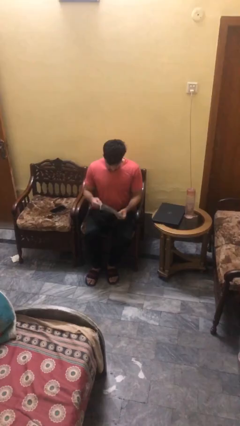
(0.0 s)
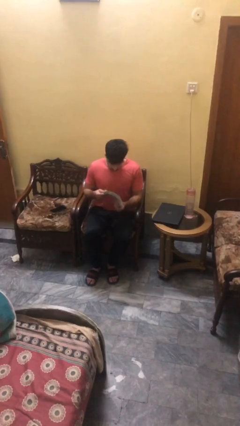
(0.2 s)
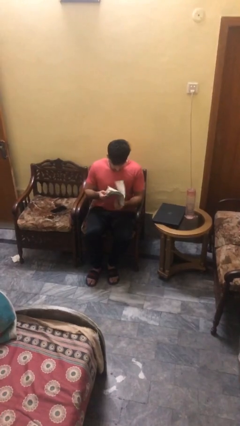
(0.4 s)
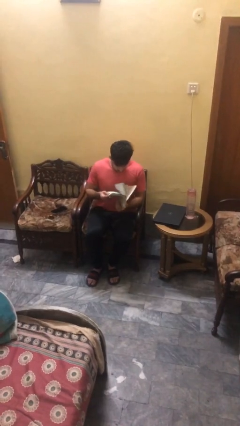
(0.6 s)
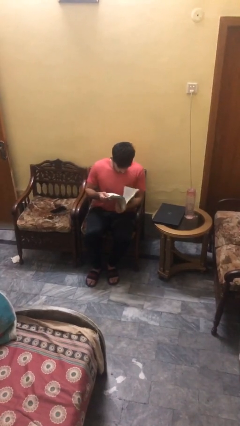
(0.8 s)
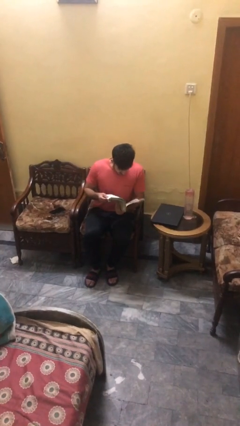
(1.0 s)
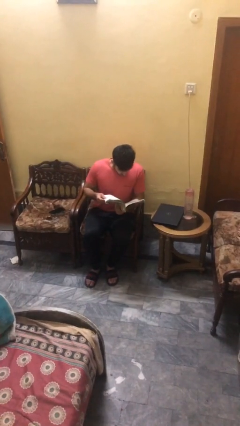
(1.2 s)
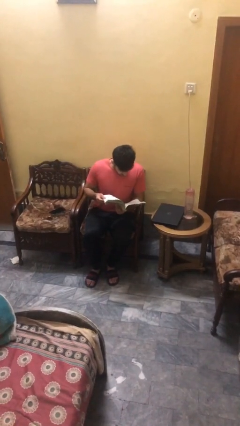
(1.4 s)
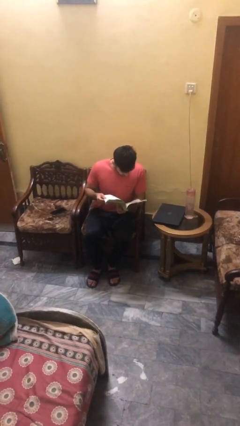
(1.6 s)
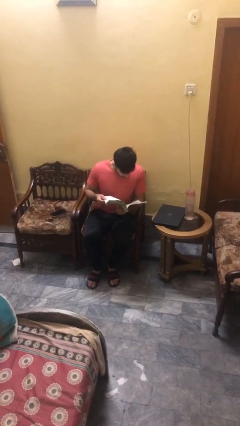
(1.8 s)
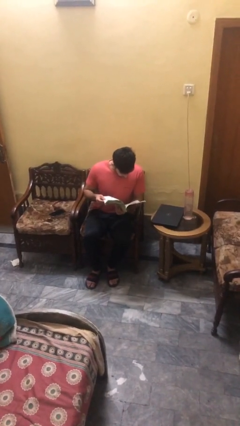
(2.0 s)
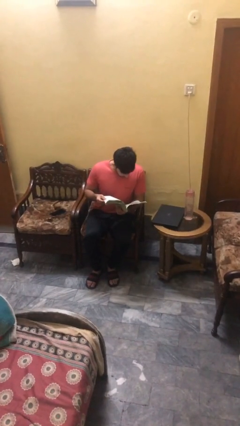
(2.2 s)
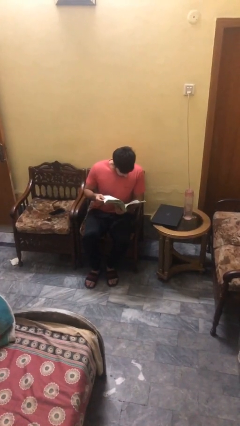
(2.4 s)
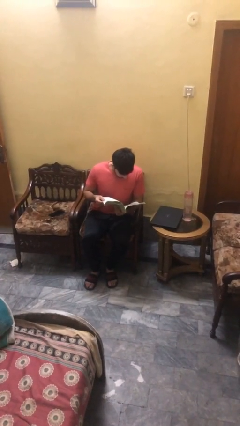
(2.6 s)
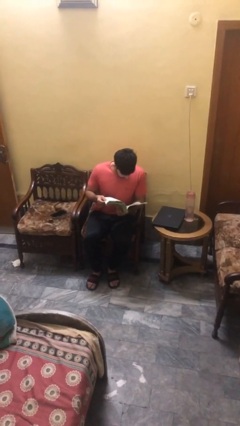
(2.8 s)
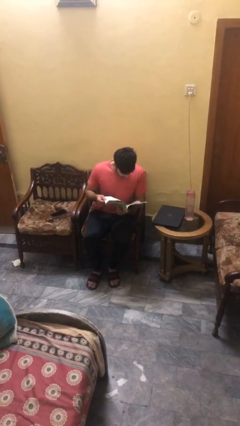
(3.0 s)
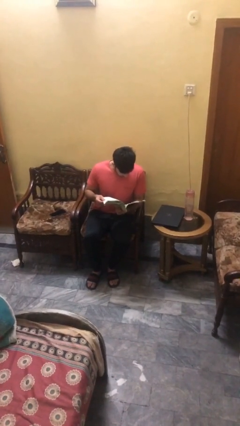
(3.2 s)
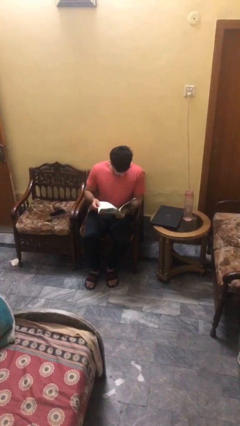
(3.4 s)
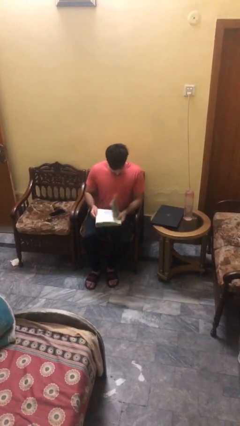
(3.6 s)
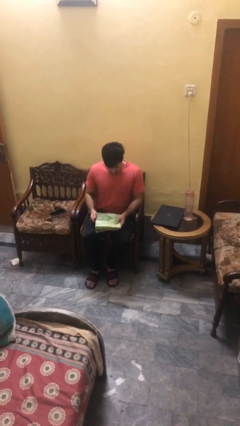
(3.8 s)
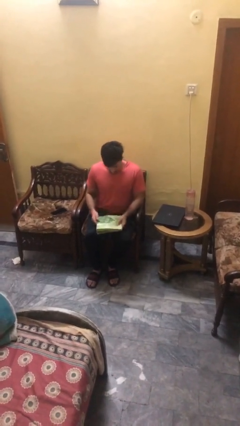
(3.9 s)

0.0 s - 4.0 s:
person reads document

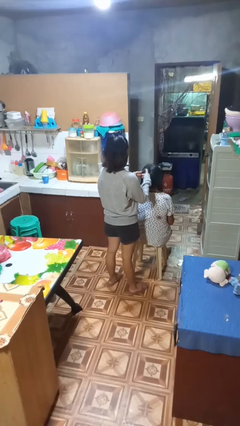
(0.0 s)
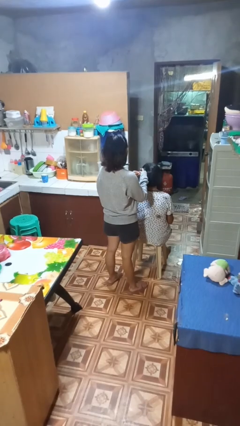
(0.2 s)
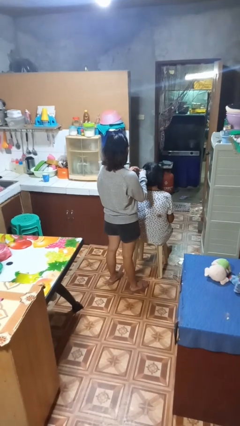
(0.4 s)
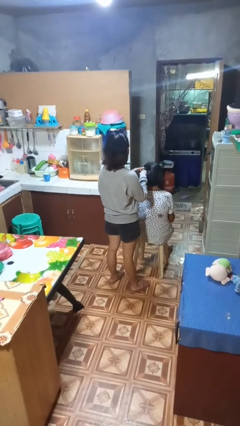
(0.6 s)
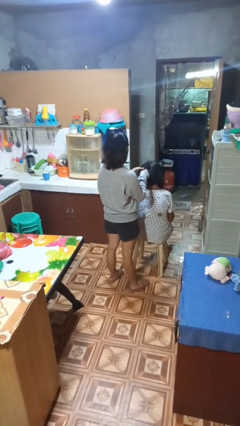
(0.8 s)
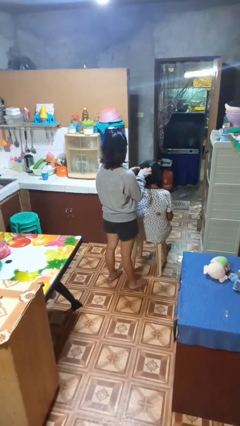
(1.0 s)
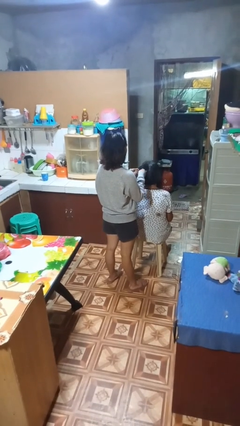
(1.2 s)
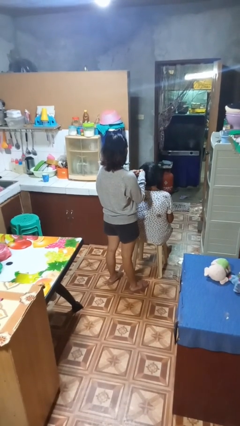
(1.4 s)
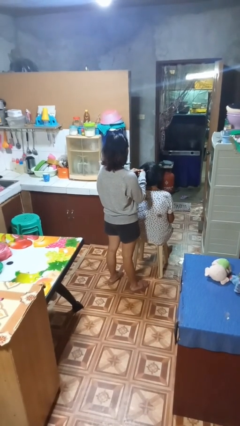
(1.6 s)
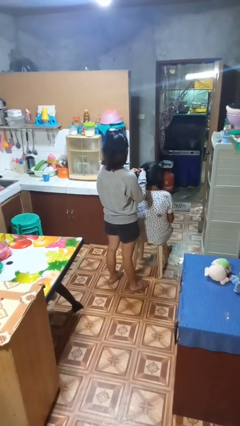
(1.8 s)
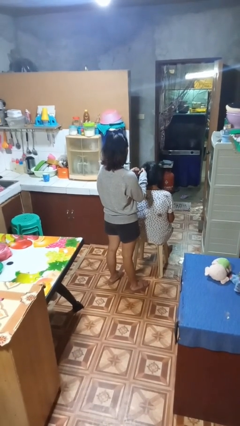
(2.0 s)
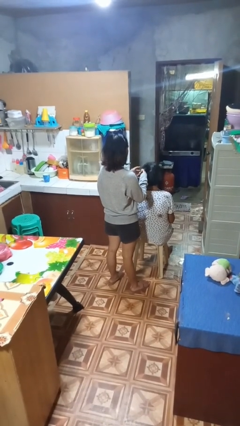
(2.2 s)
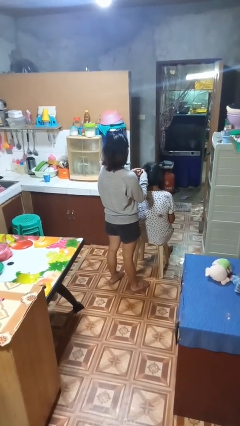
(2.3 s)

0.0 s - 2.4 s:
person braids hair of person

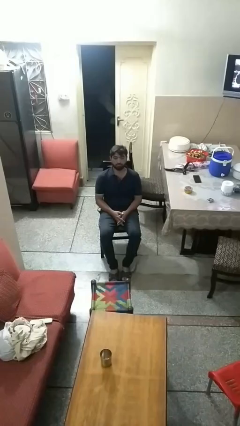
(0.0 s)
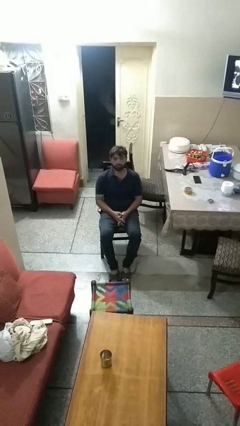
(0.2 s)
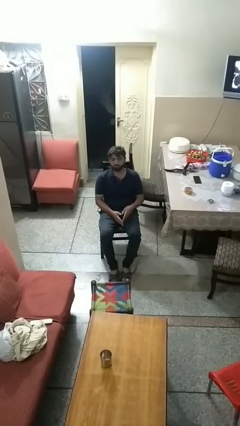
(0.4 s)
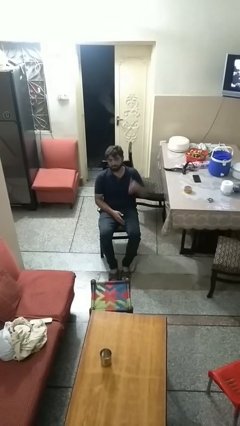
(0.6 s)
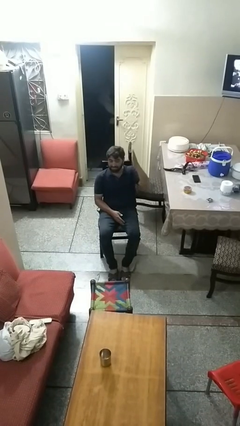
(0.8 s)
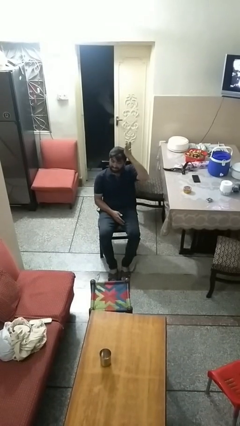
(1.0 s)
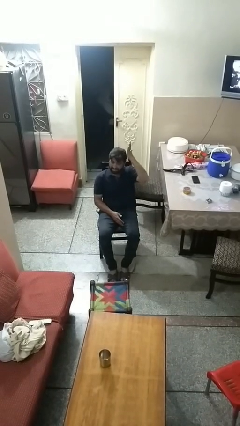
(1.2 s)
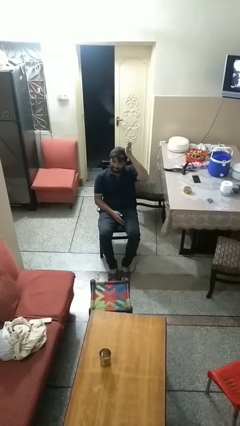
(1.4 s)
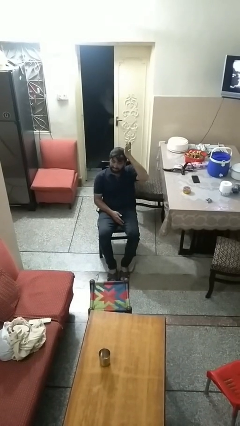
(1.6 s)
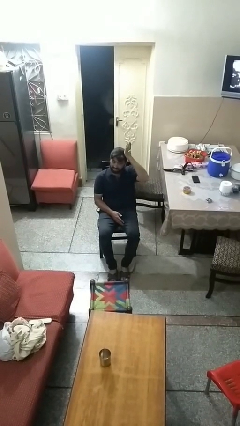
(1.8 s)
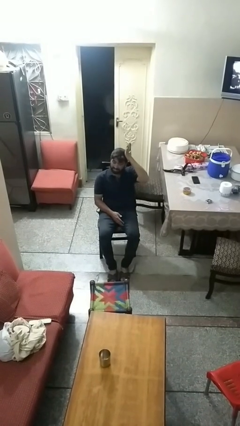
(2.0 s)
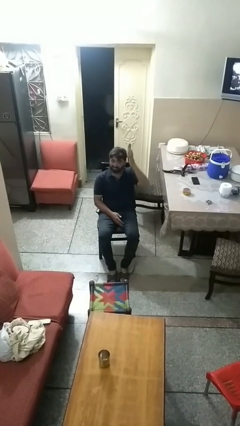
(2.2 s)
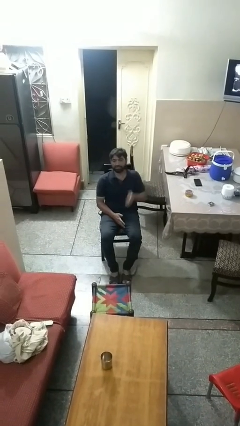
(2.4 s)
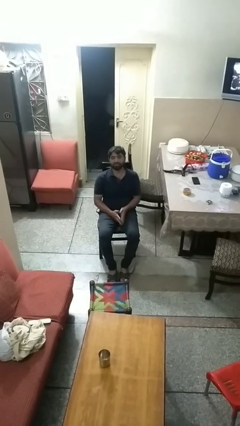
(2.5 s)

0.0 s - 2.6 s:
person pats head

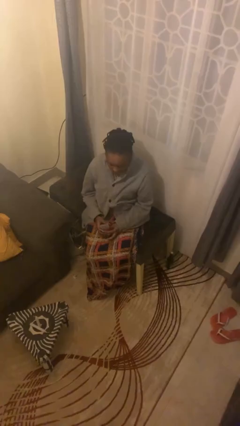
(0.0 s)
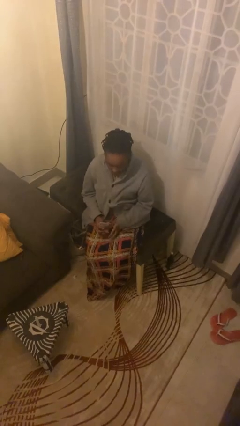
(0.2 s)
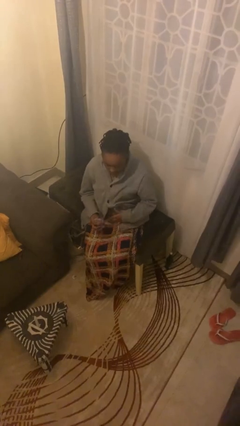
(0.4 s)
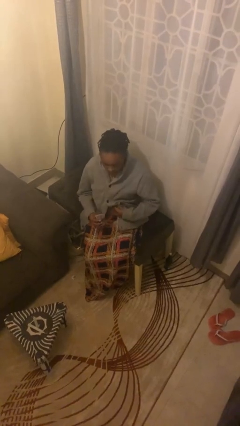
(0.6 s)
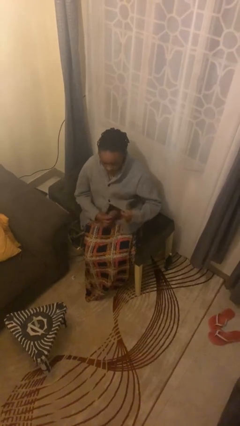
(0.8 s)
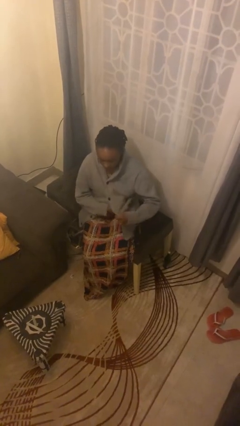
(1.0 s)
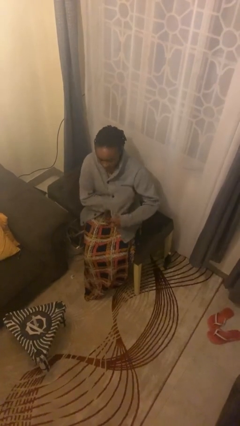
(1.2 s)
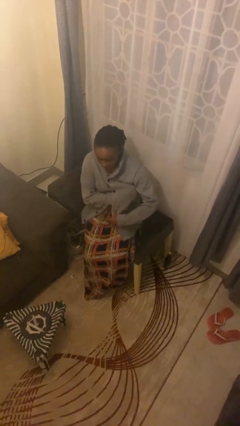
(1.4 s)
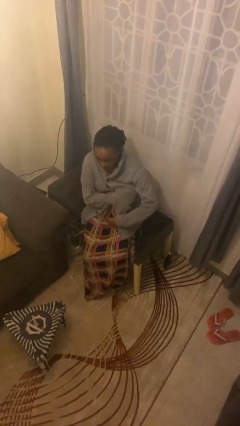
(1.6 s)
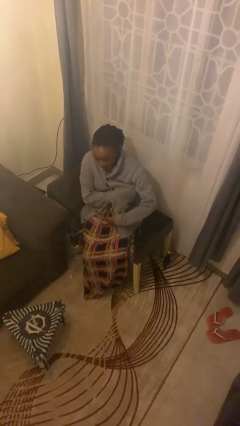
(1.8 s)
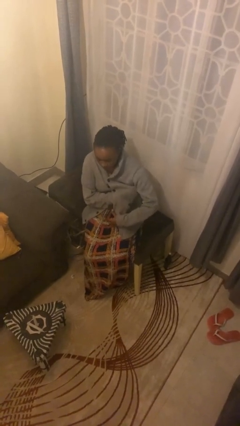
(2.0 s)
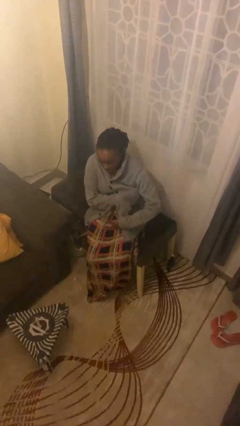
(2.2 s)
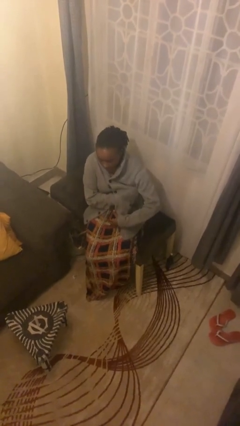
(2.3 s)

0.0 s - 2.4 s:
person applies deodorant

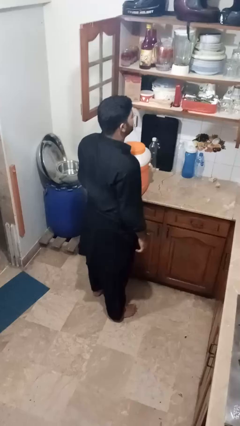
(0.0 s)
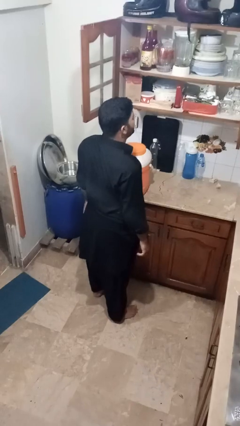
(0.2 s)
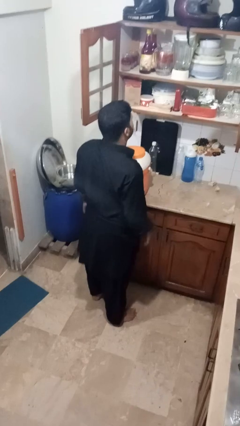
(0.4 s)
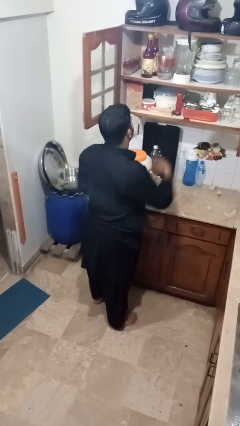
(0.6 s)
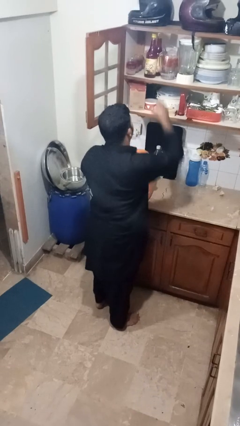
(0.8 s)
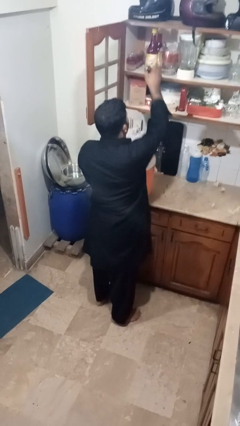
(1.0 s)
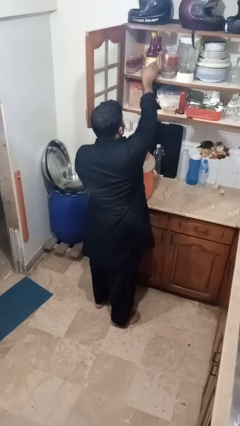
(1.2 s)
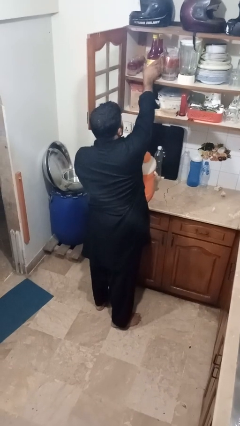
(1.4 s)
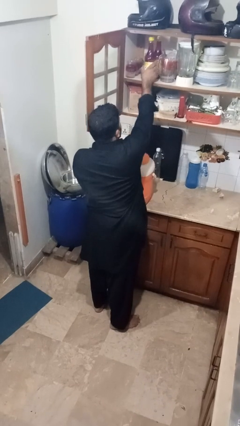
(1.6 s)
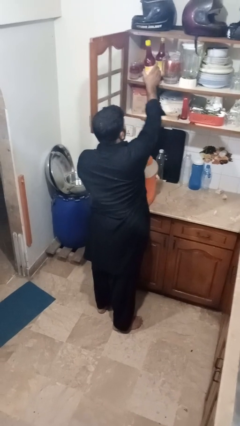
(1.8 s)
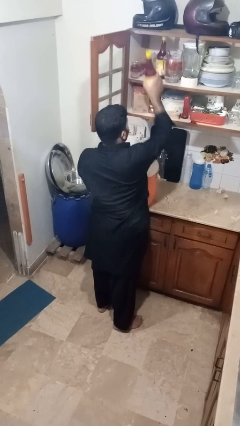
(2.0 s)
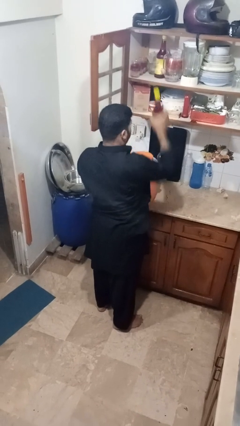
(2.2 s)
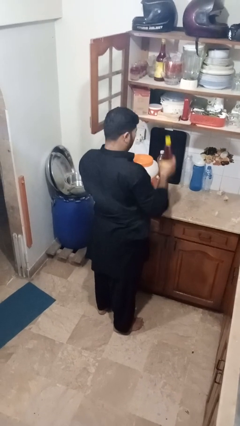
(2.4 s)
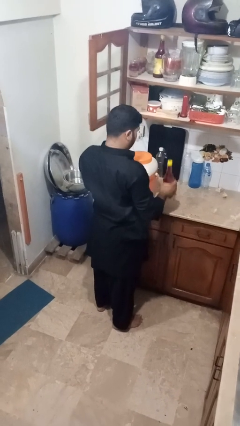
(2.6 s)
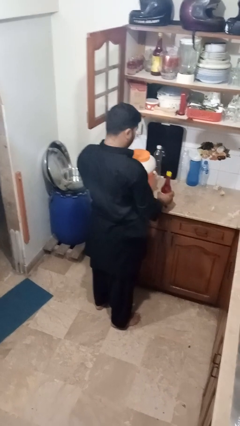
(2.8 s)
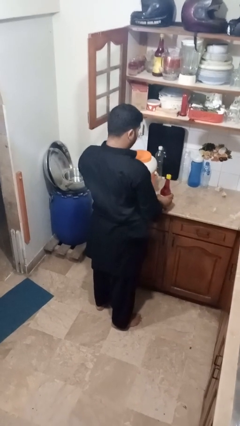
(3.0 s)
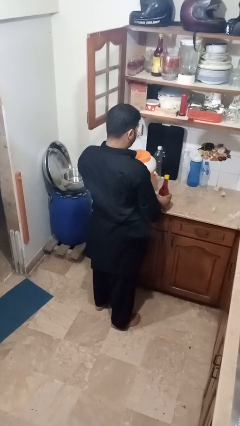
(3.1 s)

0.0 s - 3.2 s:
person picks up object from cabinet

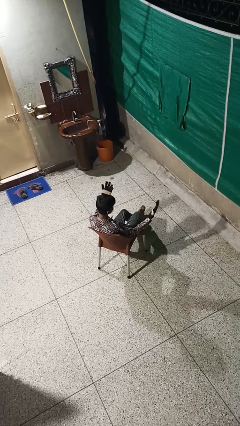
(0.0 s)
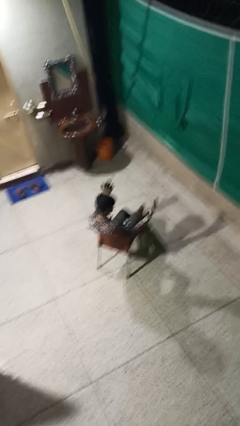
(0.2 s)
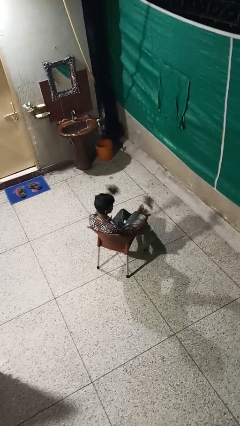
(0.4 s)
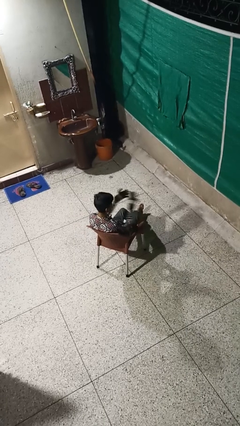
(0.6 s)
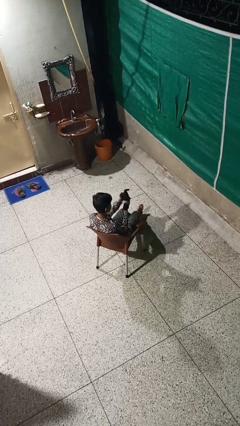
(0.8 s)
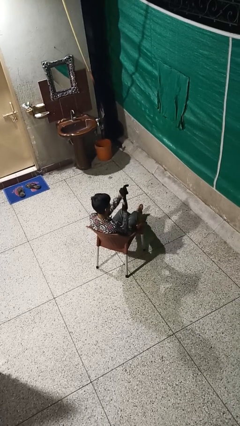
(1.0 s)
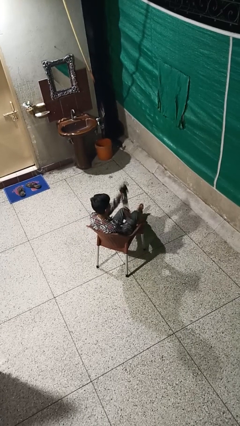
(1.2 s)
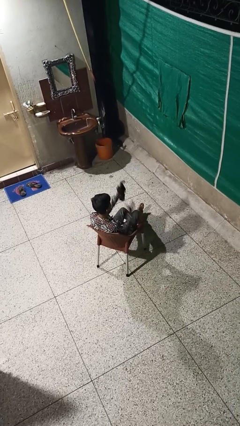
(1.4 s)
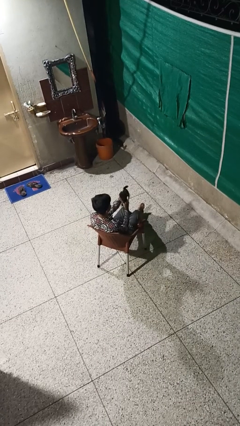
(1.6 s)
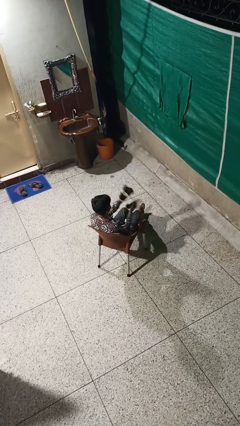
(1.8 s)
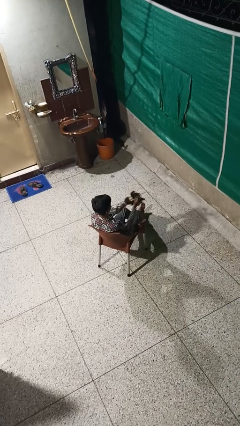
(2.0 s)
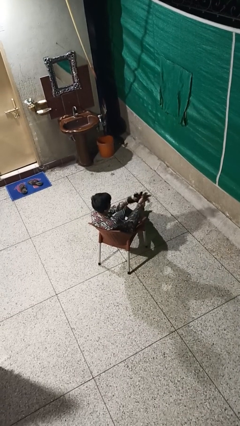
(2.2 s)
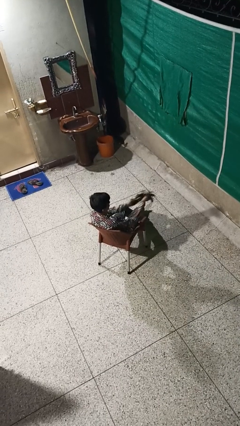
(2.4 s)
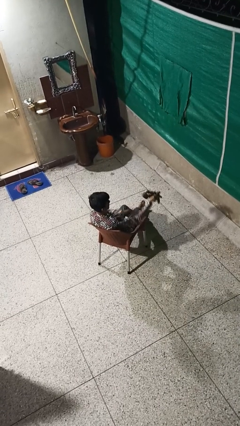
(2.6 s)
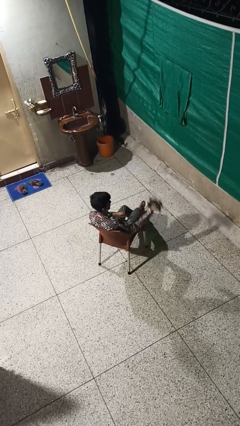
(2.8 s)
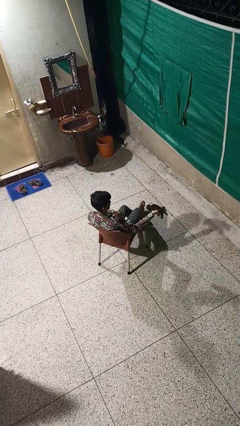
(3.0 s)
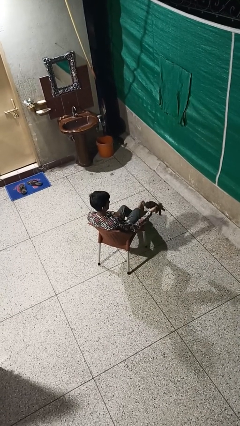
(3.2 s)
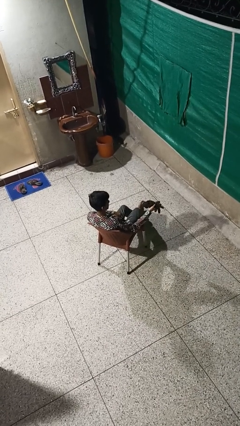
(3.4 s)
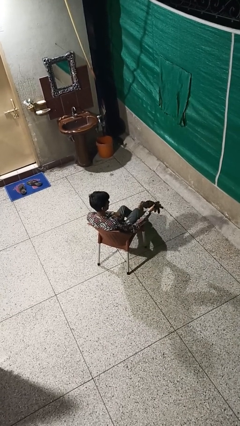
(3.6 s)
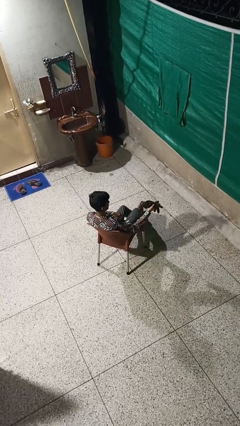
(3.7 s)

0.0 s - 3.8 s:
person takes off gloves
